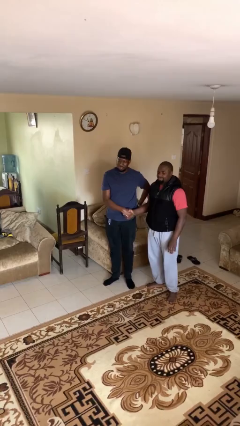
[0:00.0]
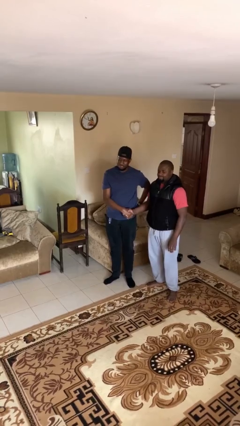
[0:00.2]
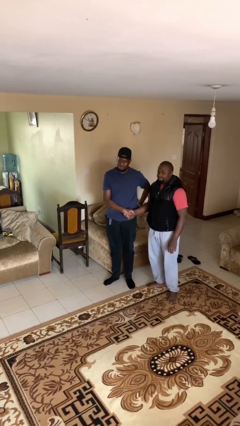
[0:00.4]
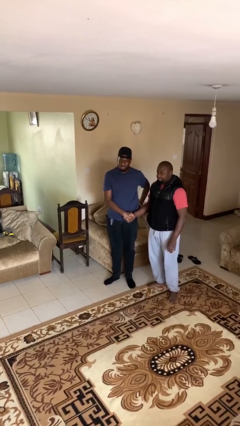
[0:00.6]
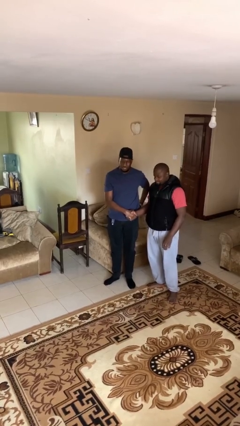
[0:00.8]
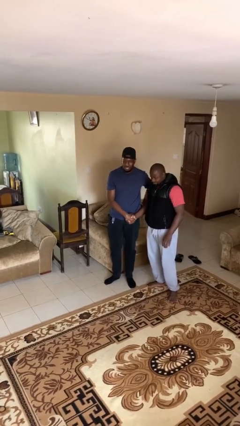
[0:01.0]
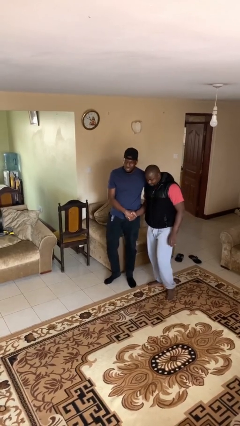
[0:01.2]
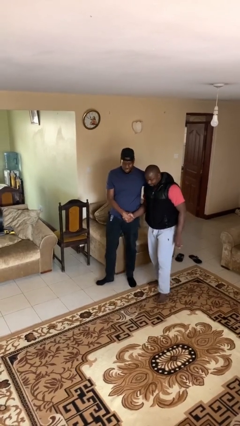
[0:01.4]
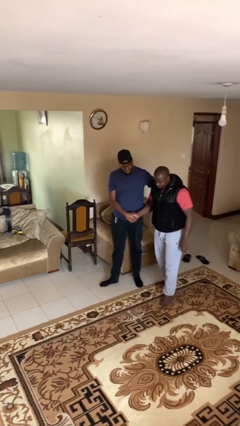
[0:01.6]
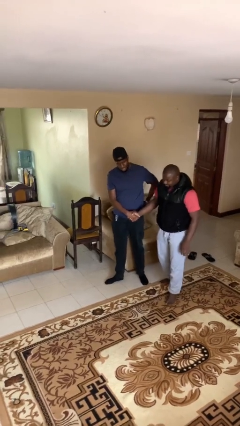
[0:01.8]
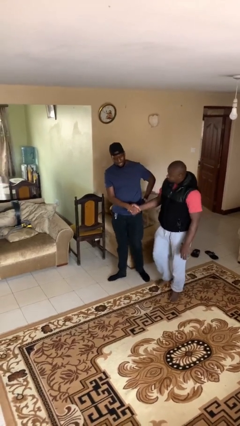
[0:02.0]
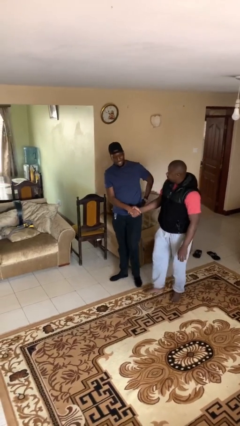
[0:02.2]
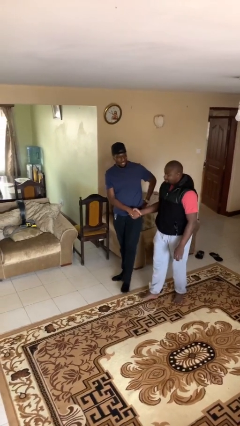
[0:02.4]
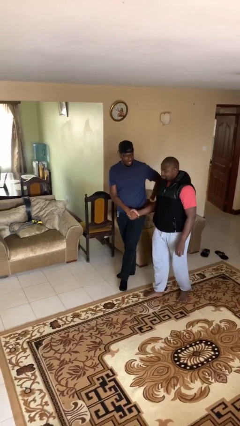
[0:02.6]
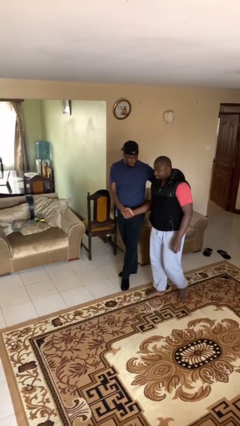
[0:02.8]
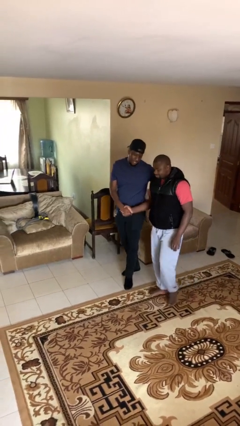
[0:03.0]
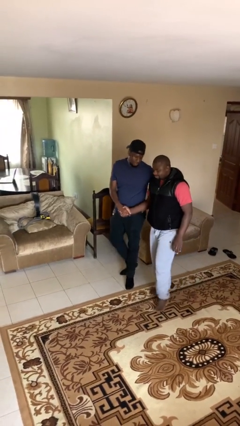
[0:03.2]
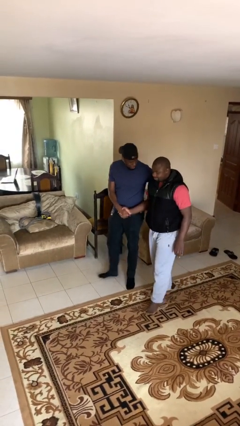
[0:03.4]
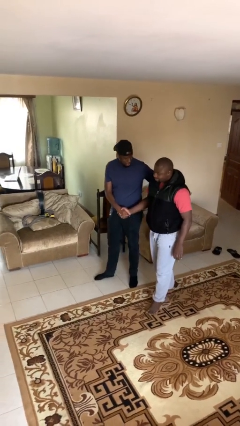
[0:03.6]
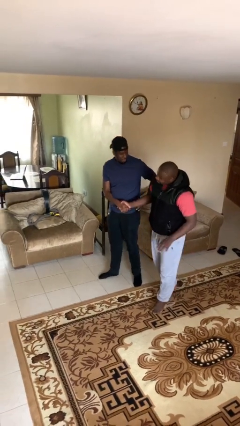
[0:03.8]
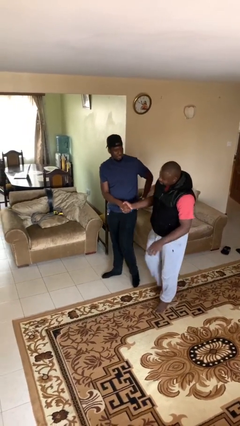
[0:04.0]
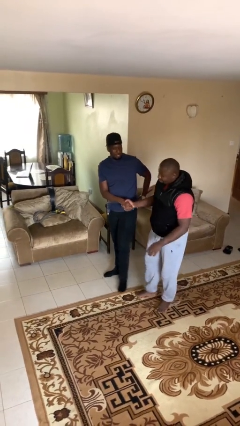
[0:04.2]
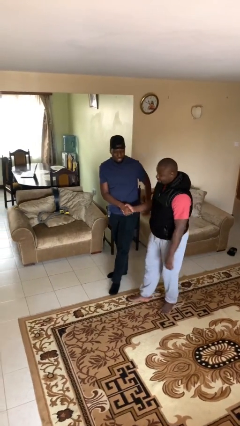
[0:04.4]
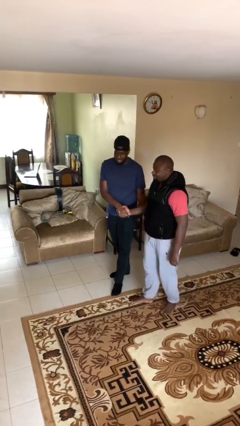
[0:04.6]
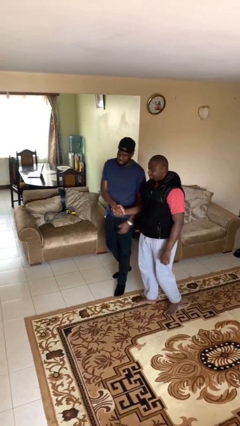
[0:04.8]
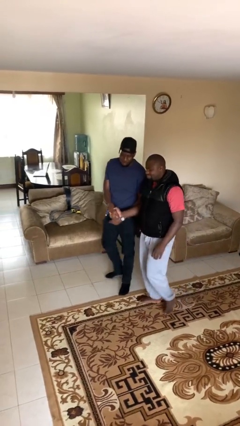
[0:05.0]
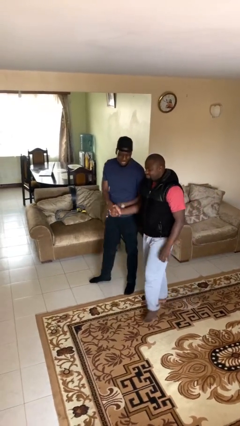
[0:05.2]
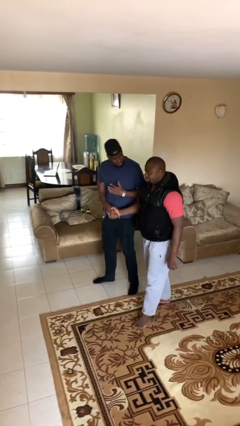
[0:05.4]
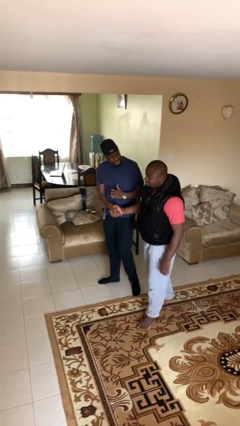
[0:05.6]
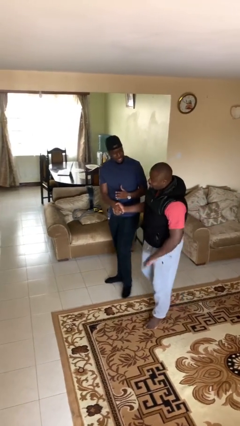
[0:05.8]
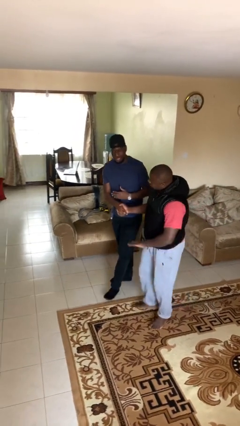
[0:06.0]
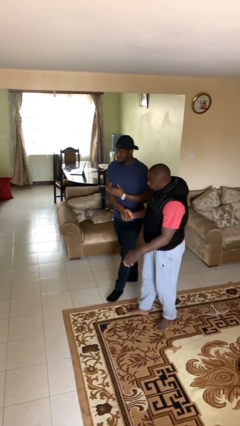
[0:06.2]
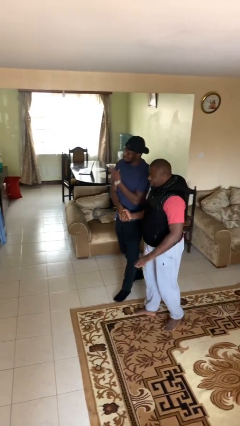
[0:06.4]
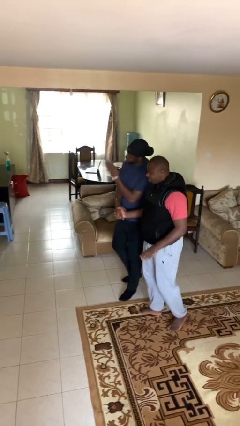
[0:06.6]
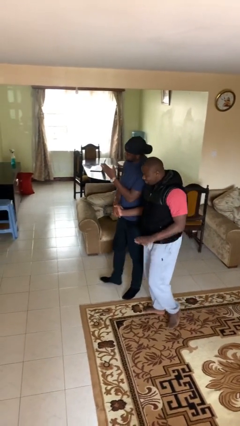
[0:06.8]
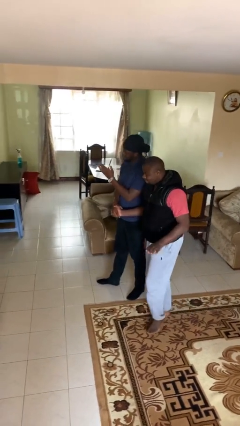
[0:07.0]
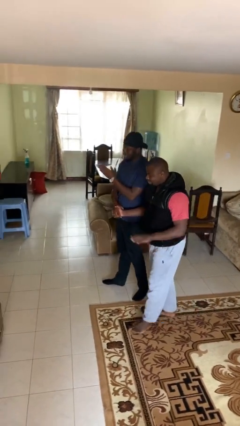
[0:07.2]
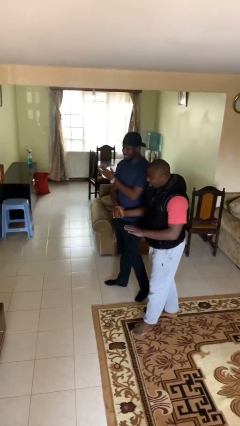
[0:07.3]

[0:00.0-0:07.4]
person holds hand

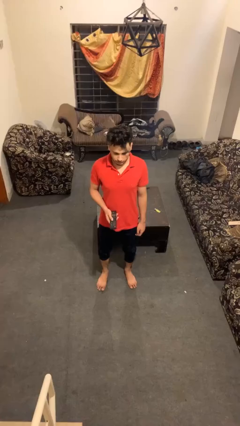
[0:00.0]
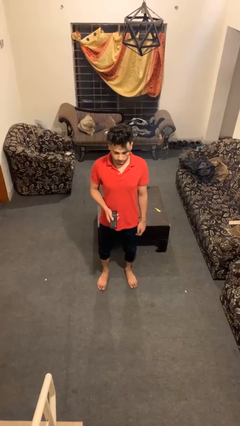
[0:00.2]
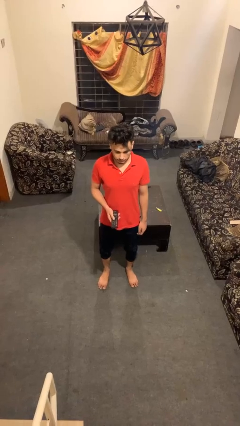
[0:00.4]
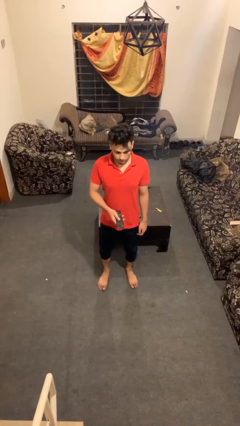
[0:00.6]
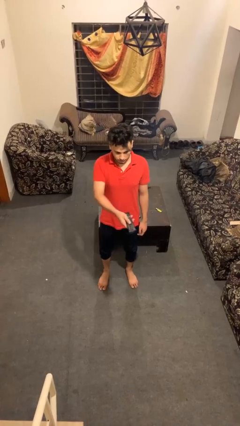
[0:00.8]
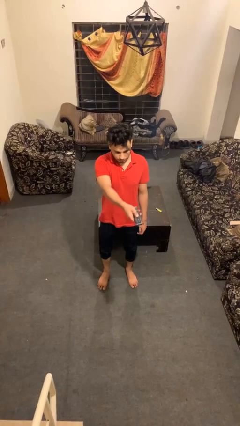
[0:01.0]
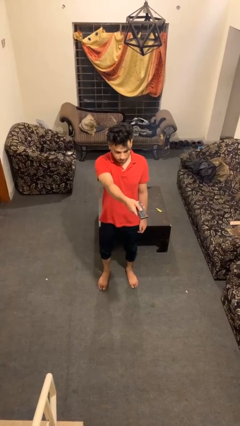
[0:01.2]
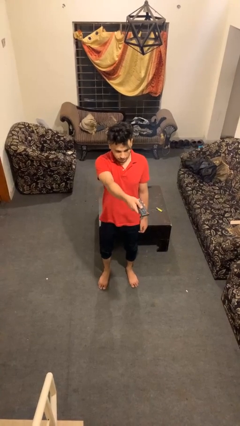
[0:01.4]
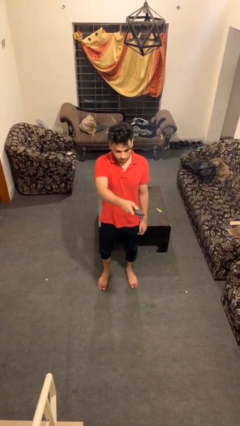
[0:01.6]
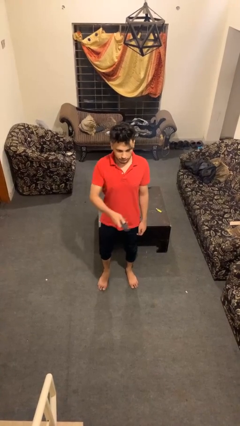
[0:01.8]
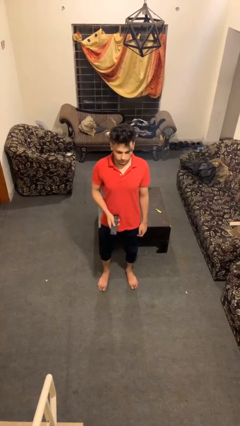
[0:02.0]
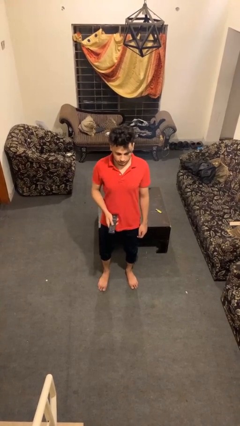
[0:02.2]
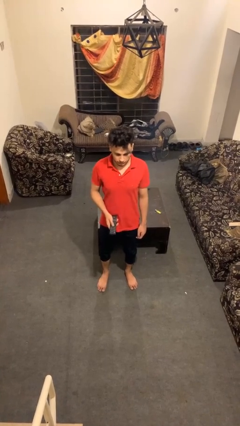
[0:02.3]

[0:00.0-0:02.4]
person uses television remote

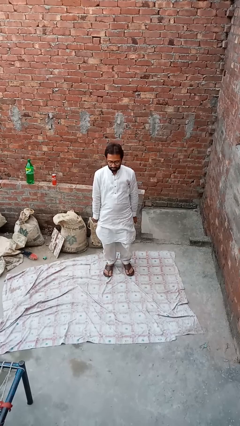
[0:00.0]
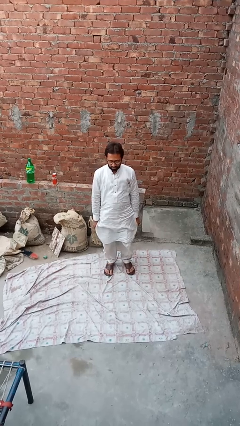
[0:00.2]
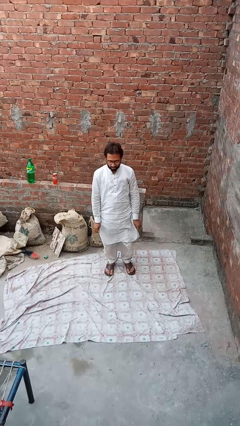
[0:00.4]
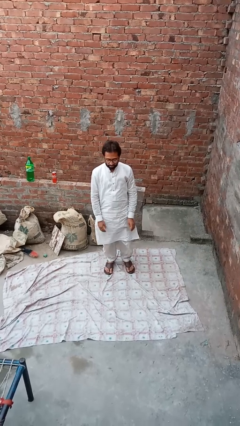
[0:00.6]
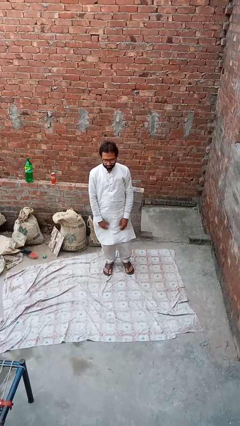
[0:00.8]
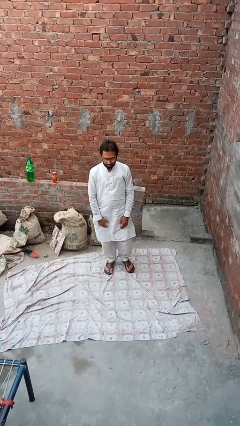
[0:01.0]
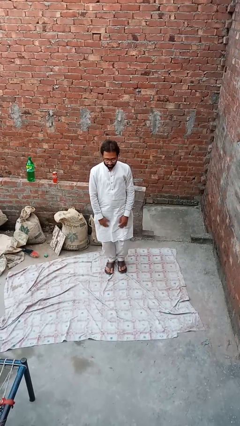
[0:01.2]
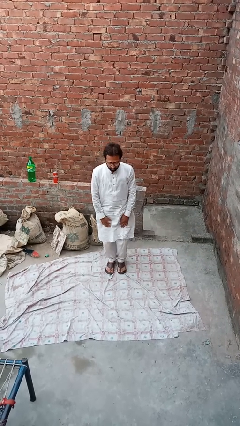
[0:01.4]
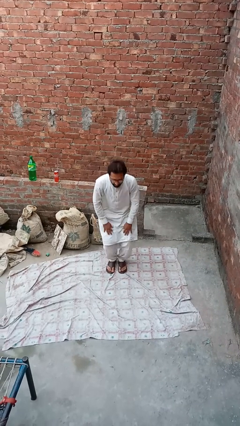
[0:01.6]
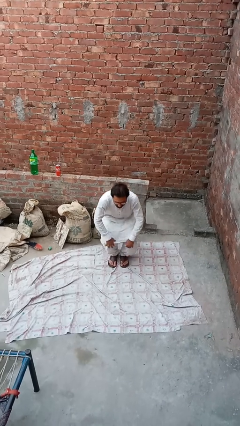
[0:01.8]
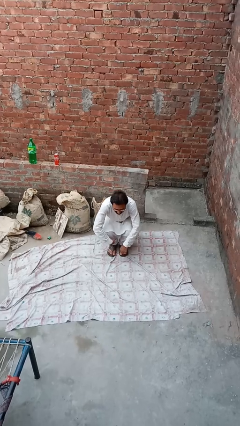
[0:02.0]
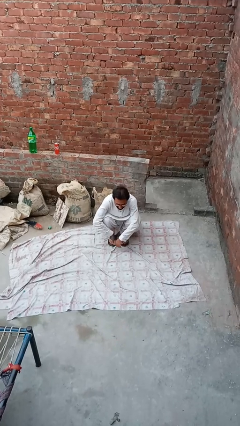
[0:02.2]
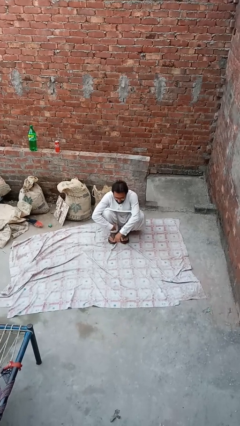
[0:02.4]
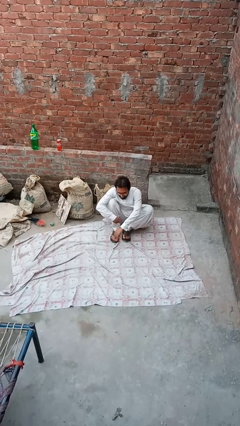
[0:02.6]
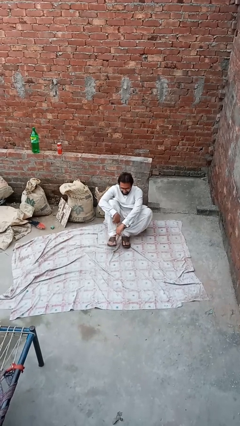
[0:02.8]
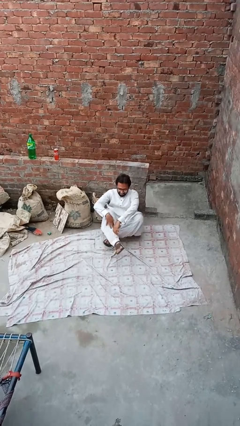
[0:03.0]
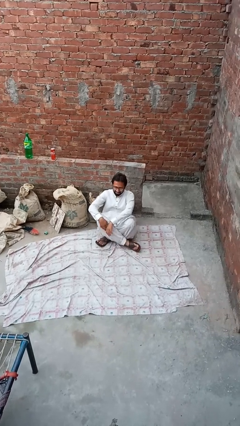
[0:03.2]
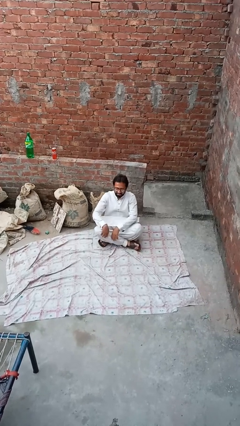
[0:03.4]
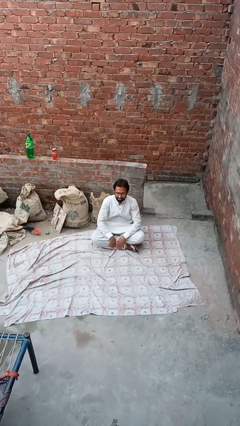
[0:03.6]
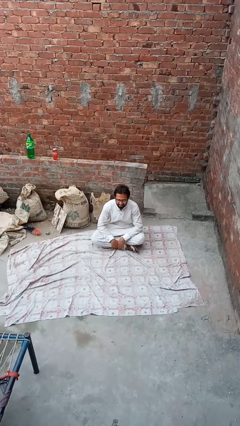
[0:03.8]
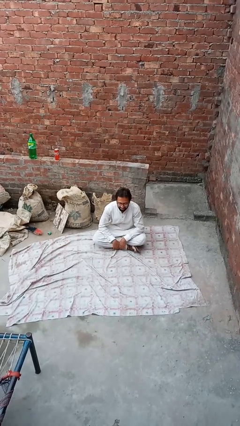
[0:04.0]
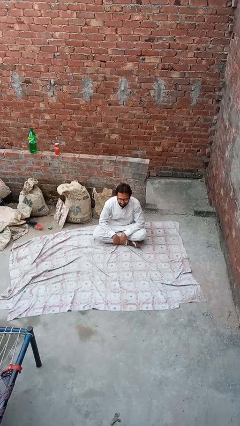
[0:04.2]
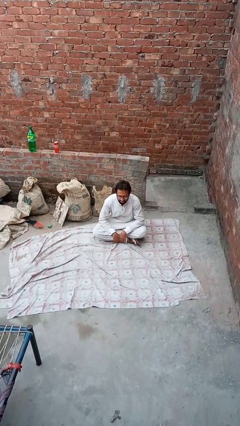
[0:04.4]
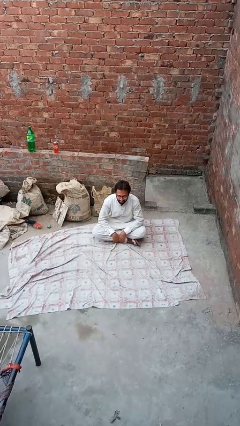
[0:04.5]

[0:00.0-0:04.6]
person sits crisscross

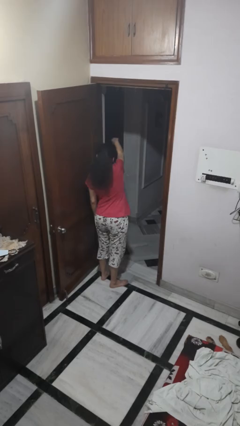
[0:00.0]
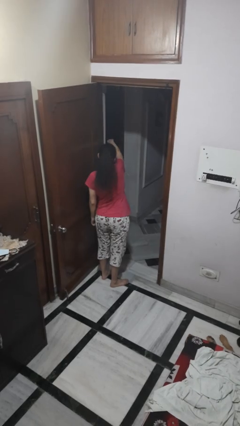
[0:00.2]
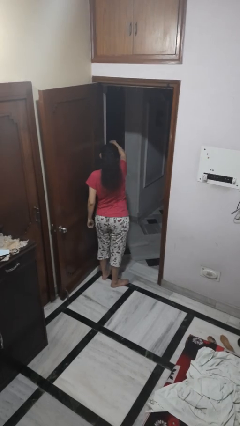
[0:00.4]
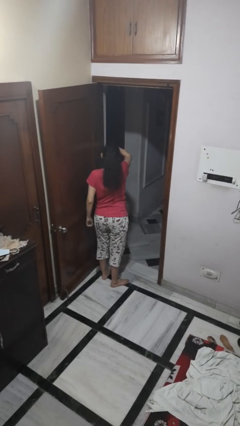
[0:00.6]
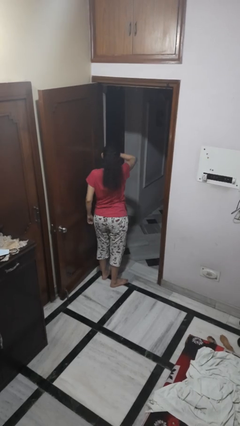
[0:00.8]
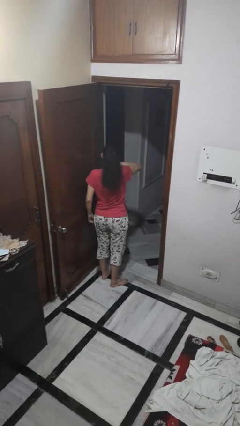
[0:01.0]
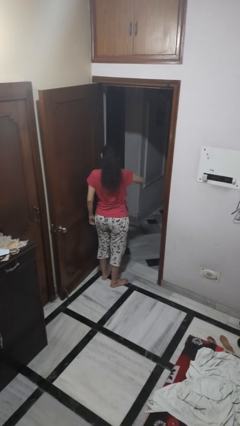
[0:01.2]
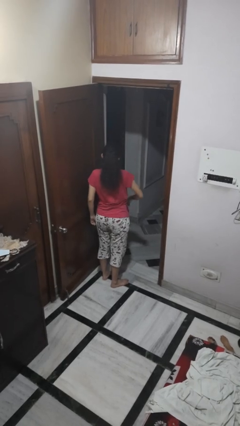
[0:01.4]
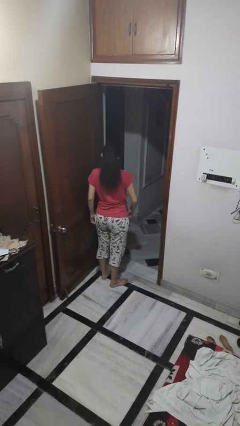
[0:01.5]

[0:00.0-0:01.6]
person punches

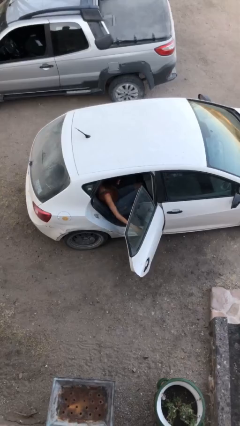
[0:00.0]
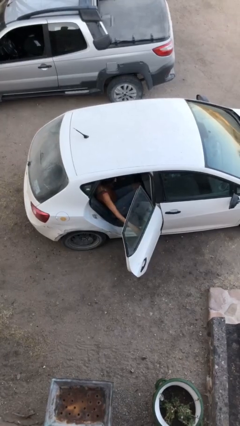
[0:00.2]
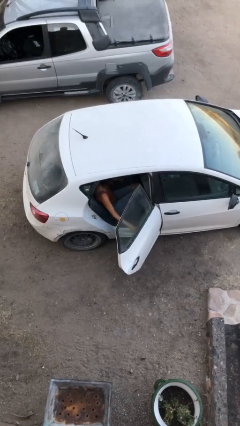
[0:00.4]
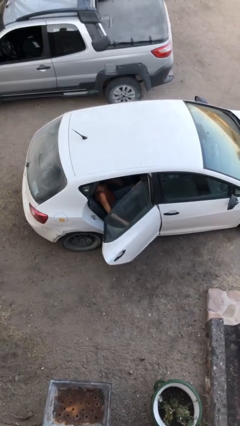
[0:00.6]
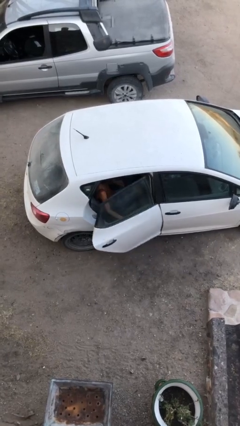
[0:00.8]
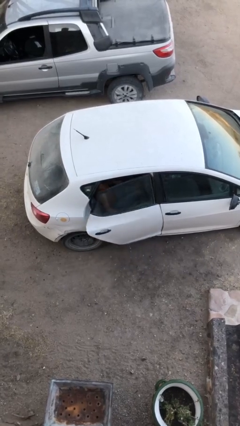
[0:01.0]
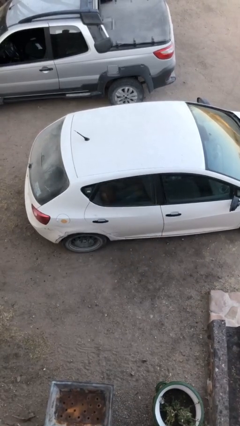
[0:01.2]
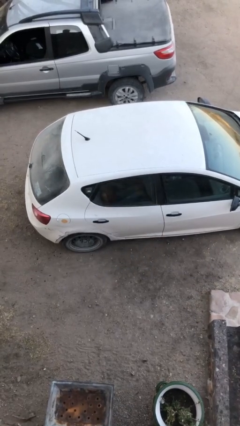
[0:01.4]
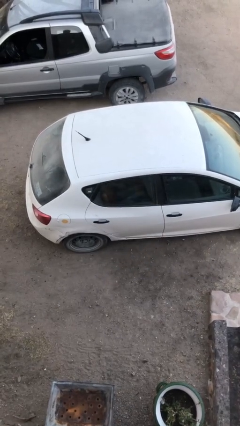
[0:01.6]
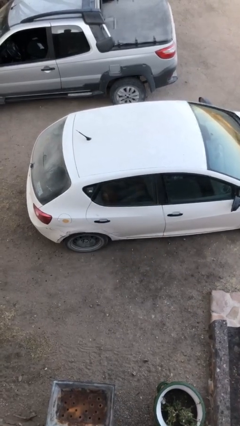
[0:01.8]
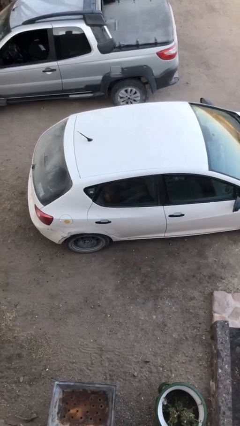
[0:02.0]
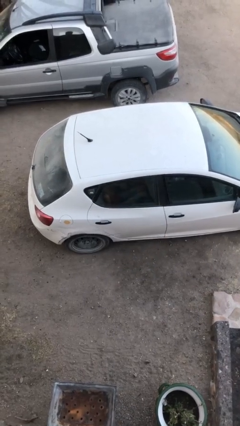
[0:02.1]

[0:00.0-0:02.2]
person closes car door
